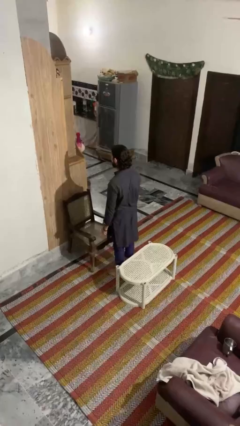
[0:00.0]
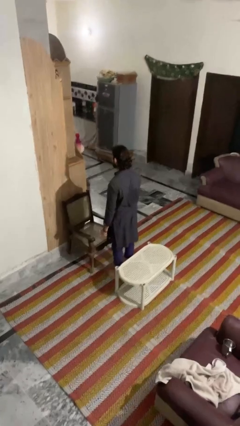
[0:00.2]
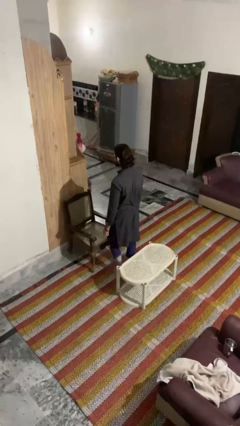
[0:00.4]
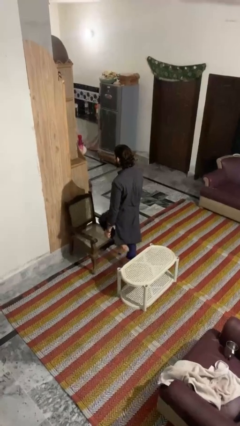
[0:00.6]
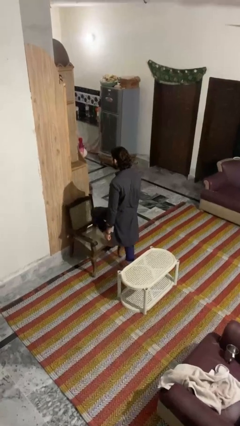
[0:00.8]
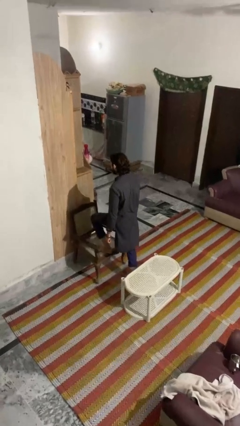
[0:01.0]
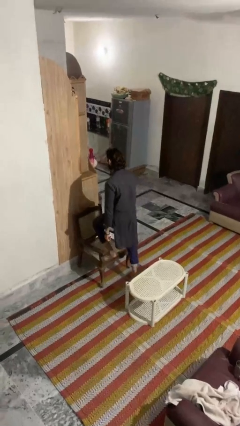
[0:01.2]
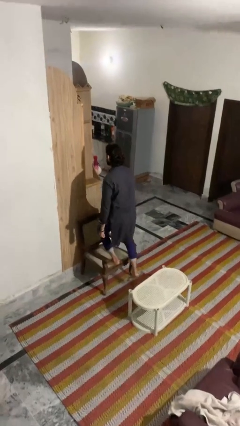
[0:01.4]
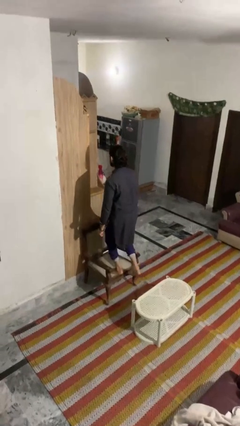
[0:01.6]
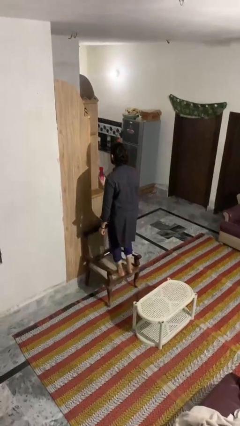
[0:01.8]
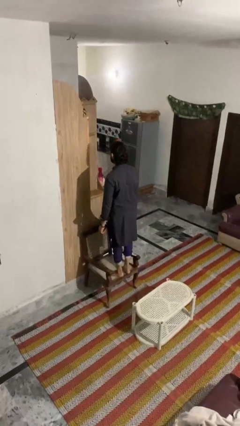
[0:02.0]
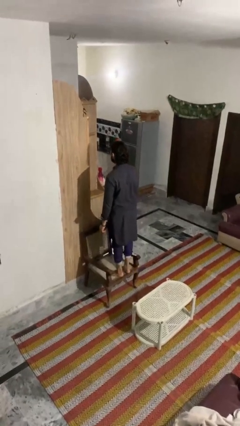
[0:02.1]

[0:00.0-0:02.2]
person climbs on chair

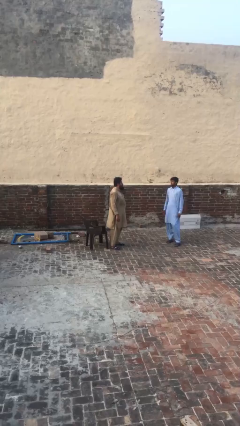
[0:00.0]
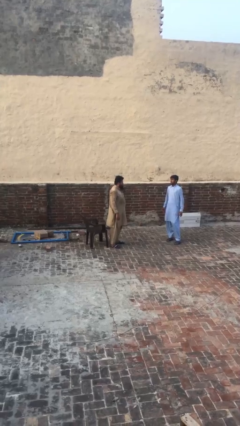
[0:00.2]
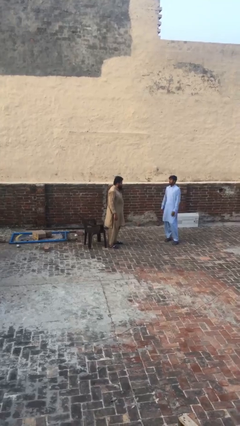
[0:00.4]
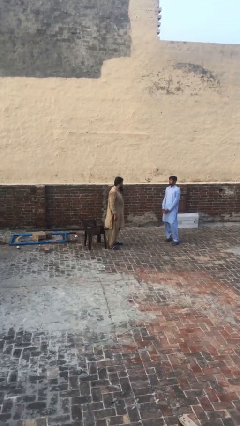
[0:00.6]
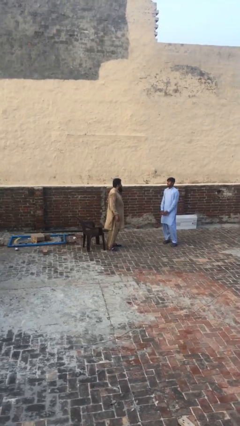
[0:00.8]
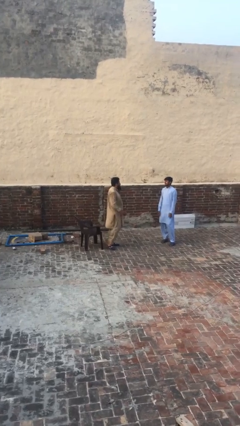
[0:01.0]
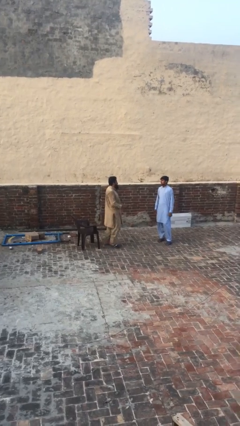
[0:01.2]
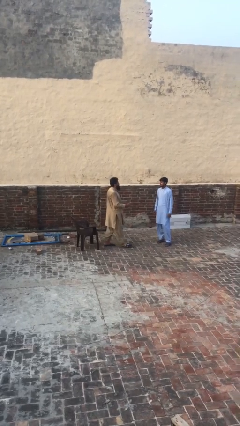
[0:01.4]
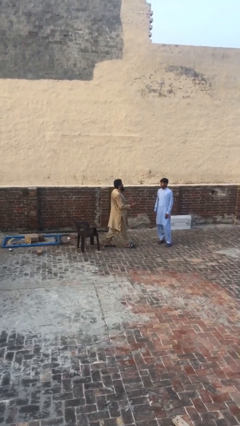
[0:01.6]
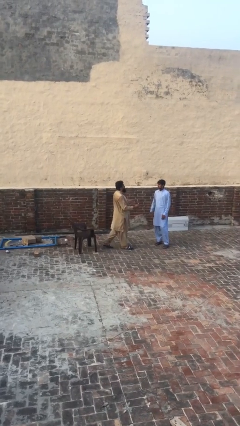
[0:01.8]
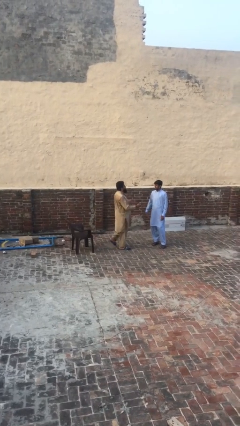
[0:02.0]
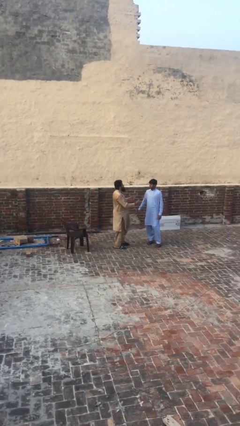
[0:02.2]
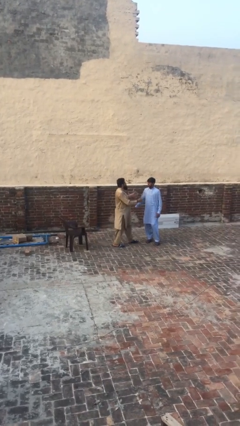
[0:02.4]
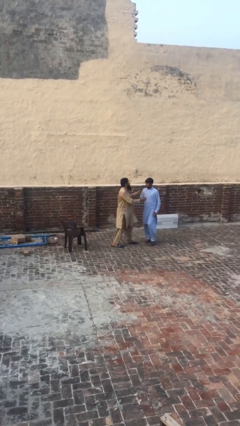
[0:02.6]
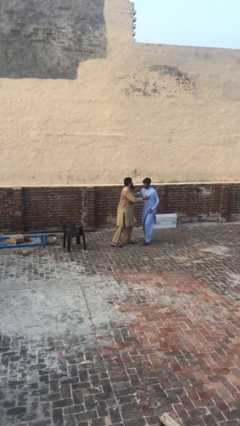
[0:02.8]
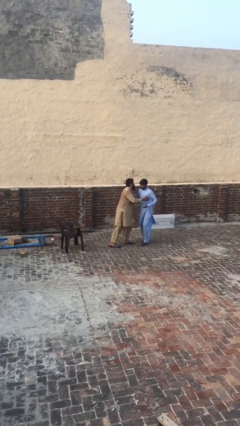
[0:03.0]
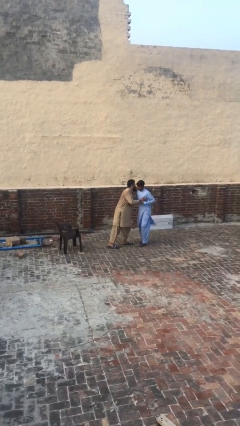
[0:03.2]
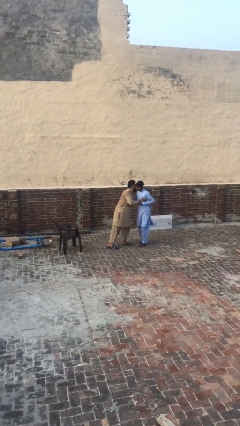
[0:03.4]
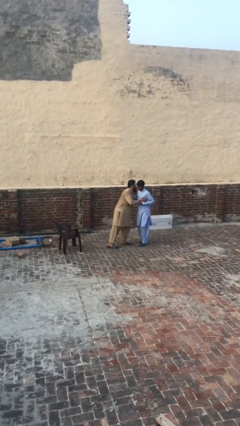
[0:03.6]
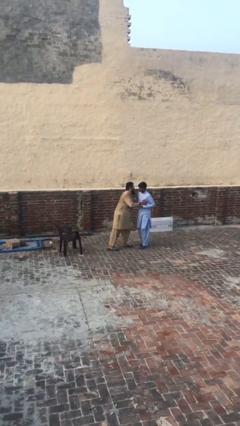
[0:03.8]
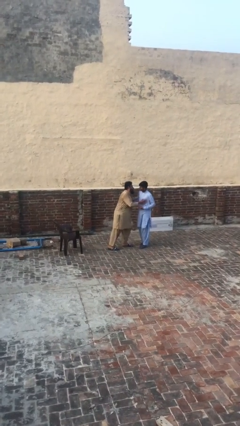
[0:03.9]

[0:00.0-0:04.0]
person embraces person

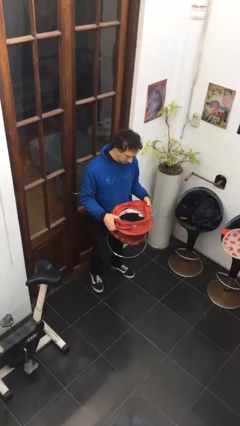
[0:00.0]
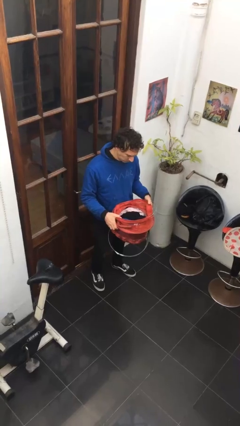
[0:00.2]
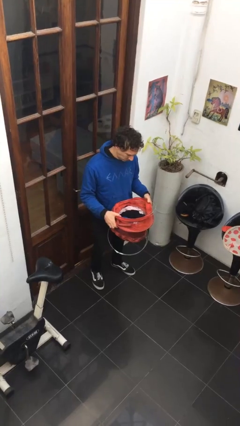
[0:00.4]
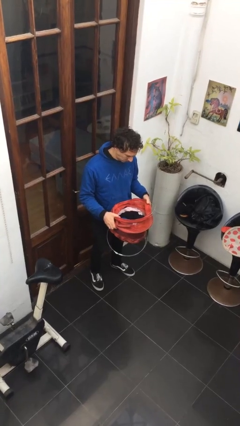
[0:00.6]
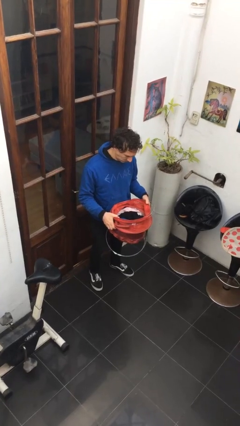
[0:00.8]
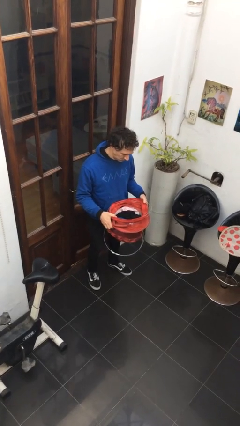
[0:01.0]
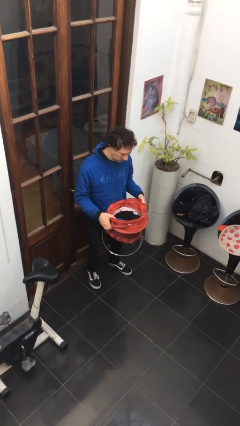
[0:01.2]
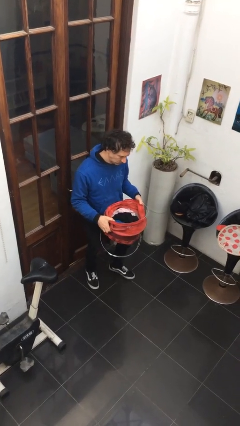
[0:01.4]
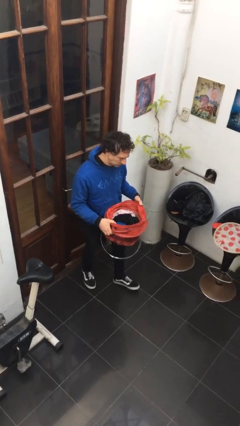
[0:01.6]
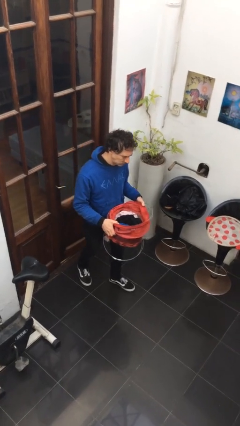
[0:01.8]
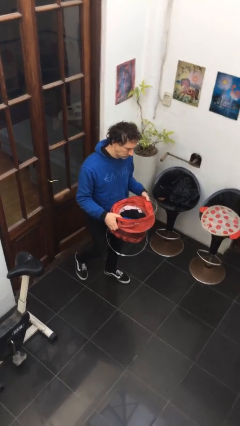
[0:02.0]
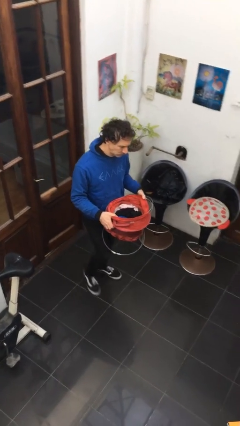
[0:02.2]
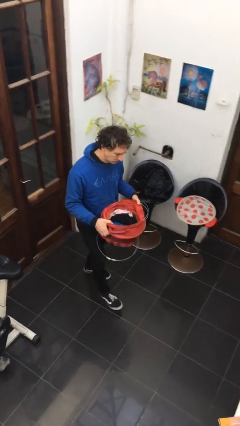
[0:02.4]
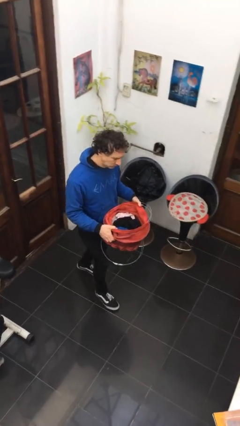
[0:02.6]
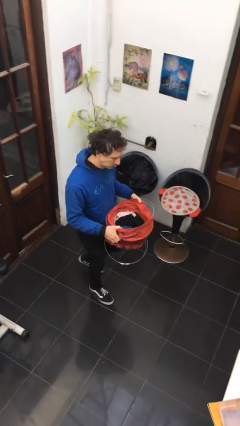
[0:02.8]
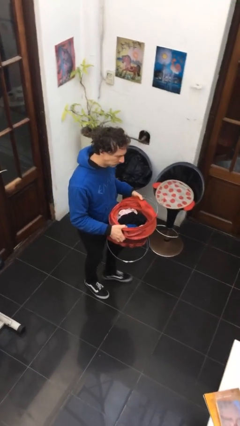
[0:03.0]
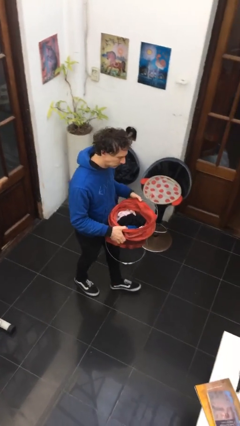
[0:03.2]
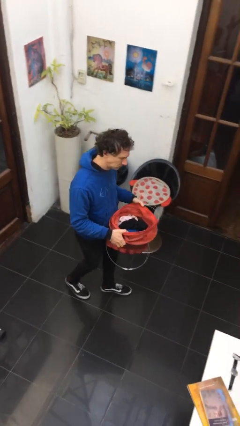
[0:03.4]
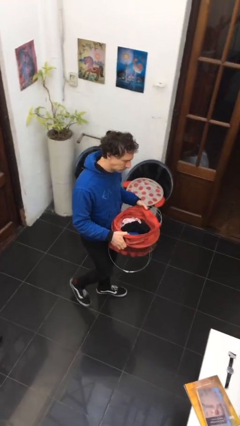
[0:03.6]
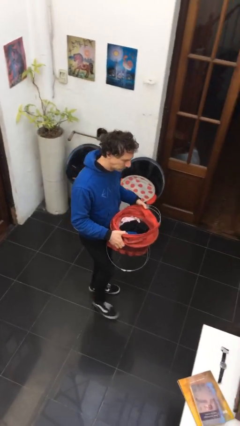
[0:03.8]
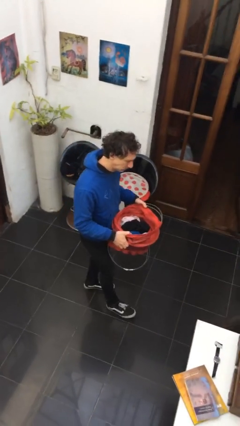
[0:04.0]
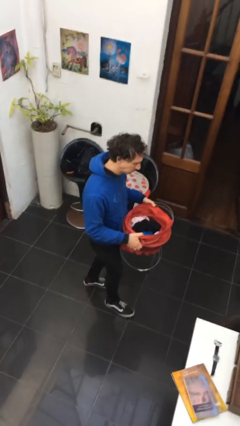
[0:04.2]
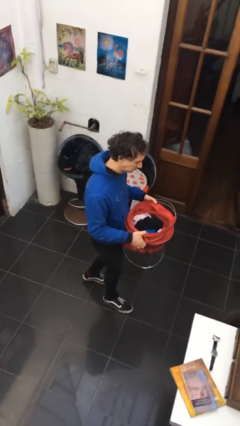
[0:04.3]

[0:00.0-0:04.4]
person carries laundry basket

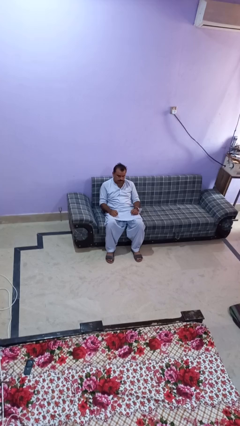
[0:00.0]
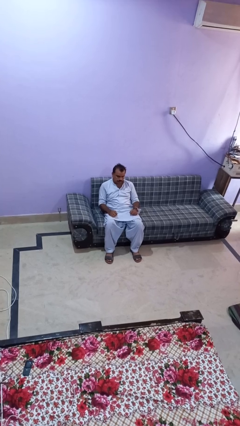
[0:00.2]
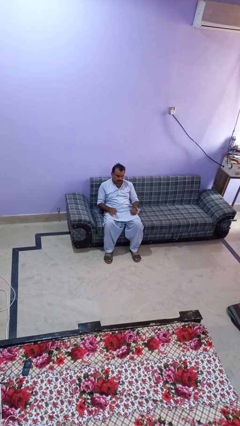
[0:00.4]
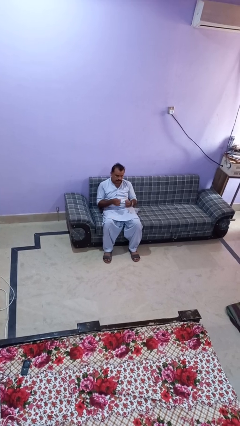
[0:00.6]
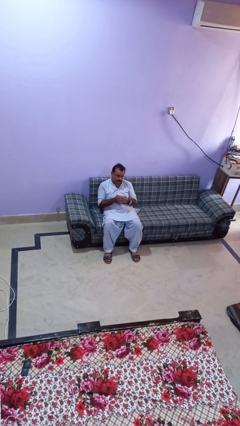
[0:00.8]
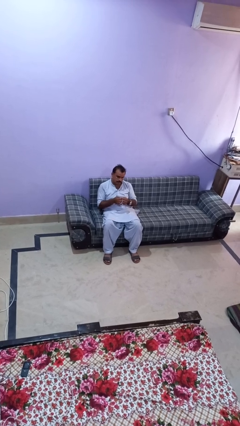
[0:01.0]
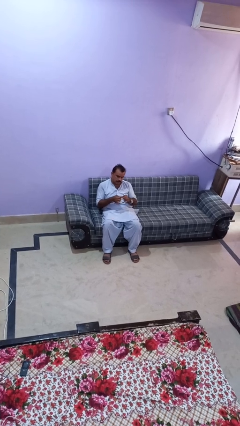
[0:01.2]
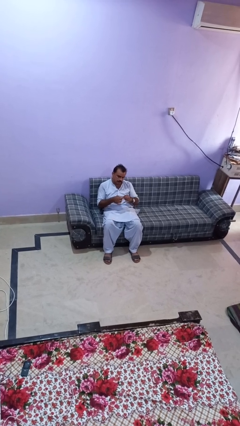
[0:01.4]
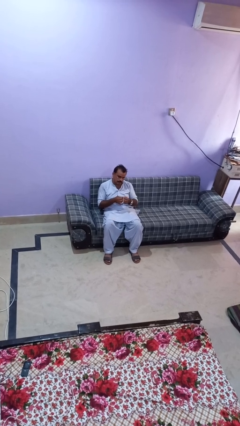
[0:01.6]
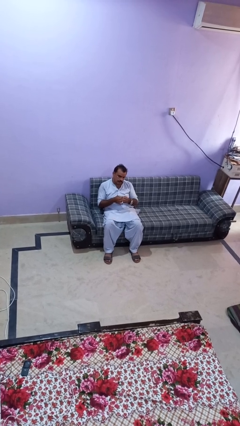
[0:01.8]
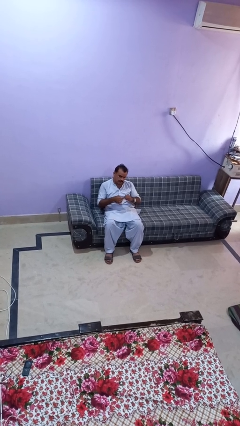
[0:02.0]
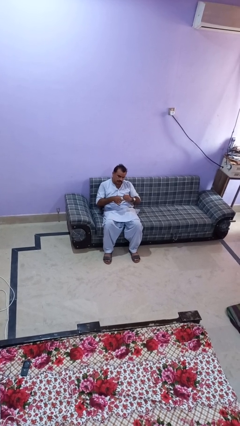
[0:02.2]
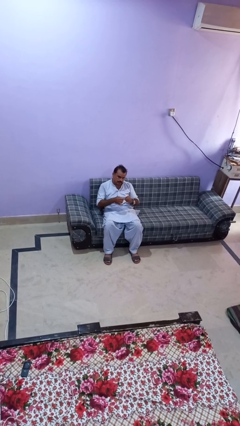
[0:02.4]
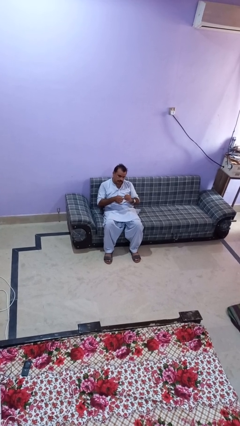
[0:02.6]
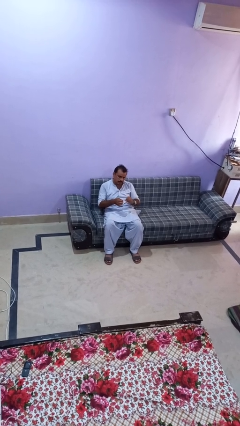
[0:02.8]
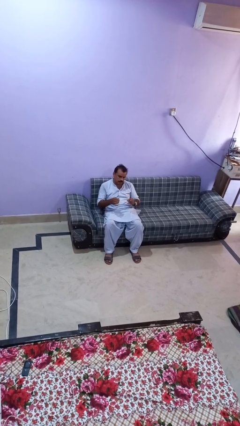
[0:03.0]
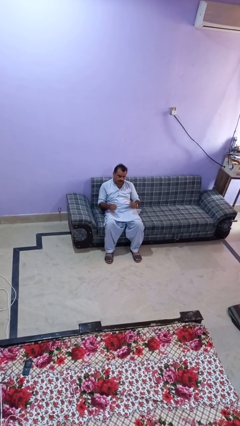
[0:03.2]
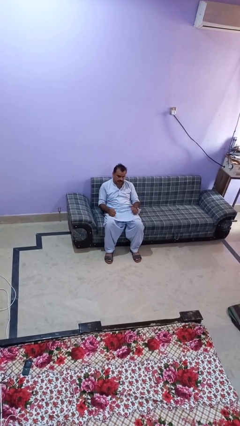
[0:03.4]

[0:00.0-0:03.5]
person files fingernails

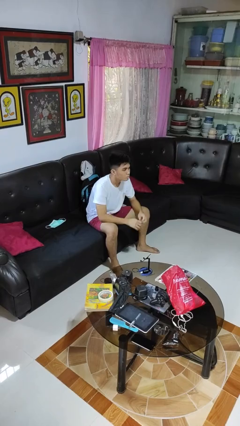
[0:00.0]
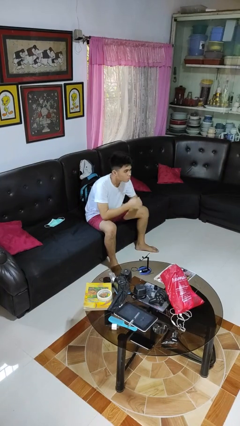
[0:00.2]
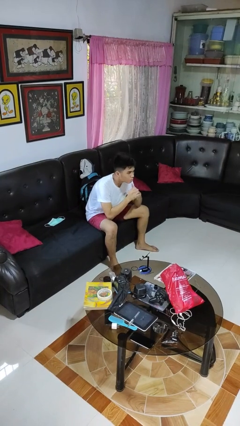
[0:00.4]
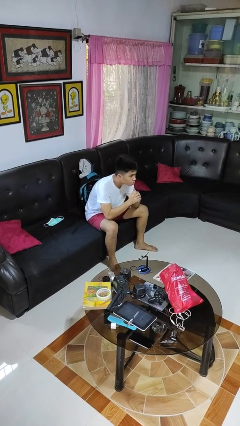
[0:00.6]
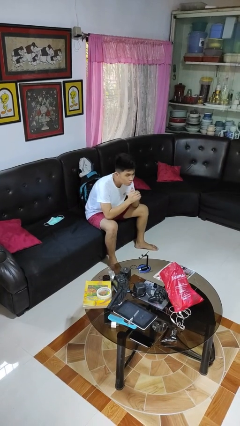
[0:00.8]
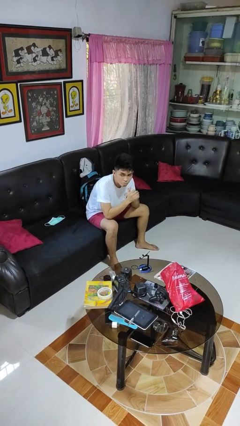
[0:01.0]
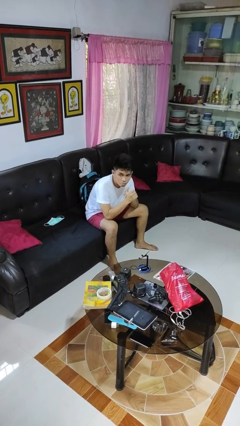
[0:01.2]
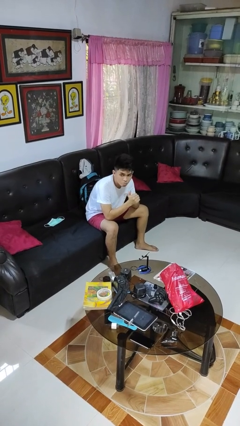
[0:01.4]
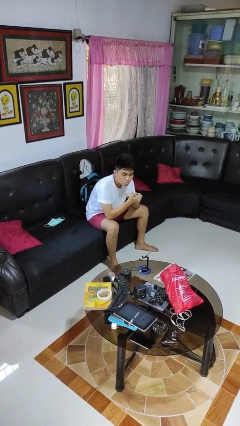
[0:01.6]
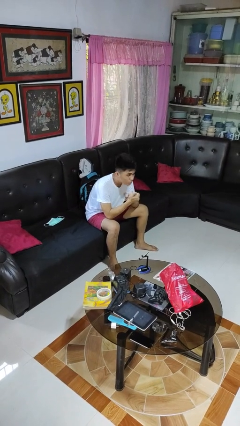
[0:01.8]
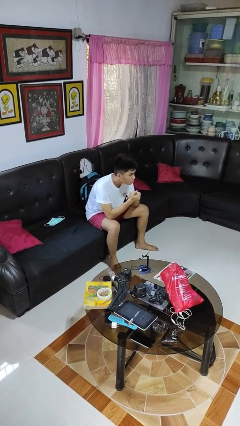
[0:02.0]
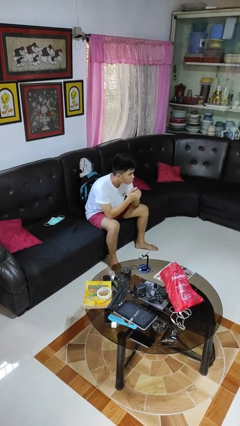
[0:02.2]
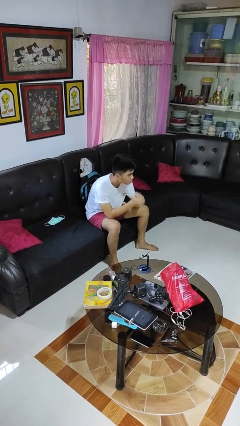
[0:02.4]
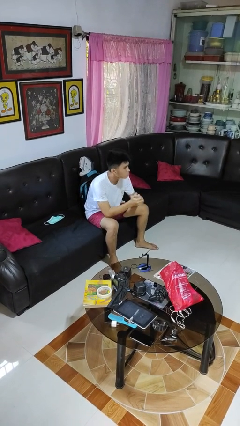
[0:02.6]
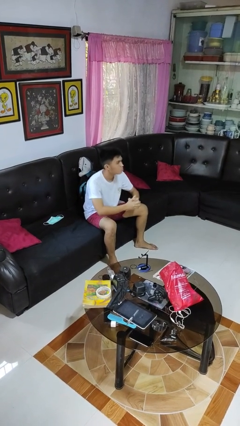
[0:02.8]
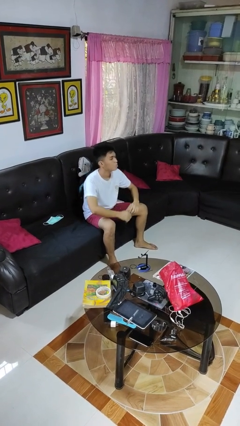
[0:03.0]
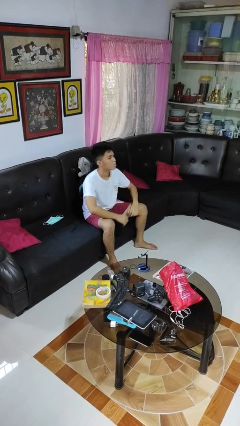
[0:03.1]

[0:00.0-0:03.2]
person cracks knuckles
